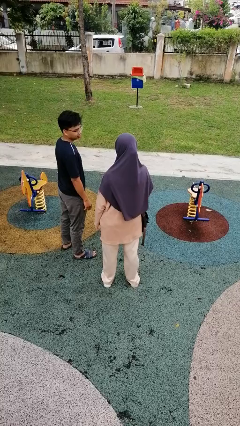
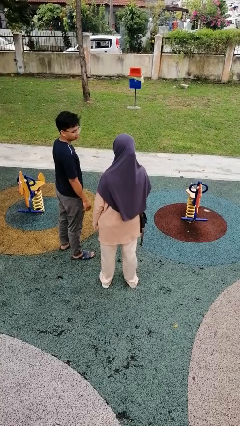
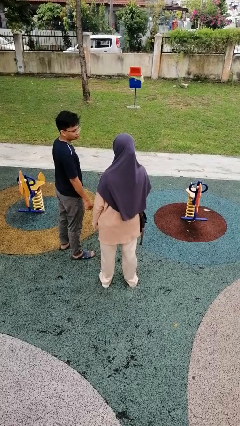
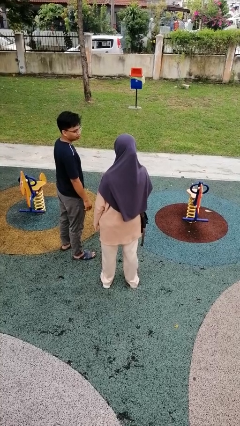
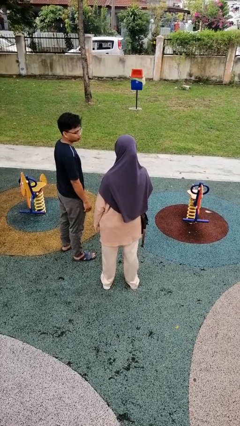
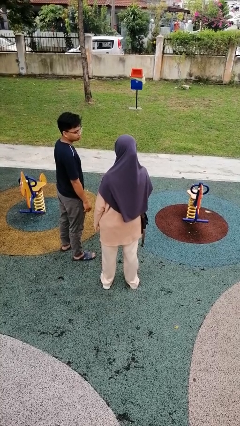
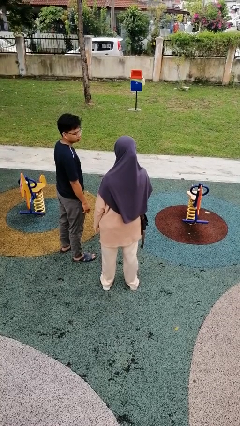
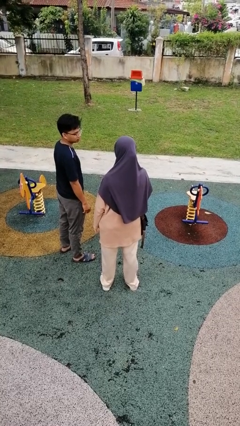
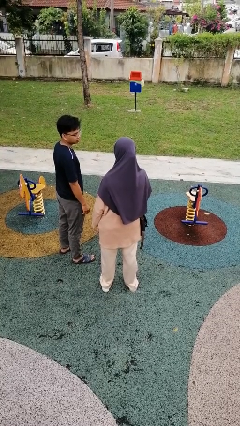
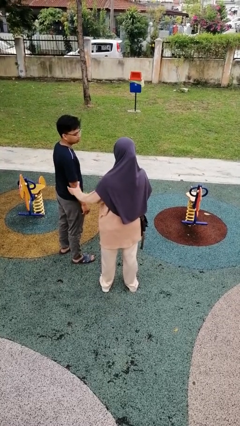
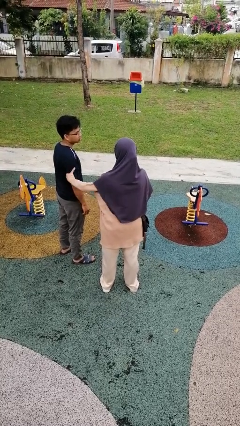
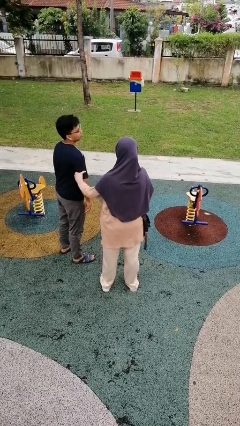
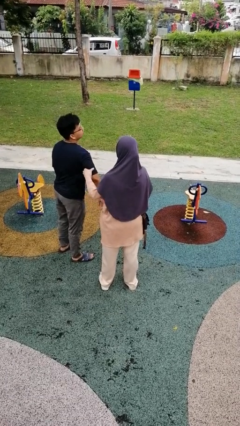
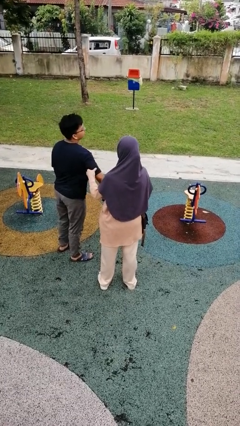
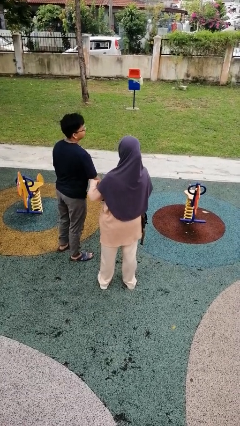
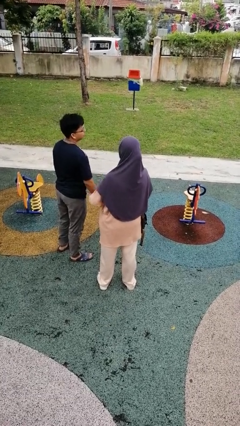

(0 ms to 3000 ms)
person grabs person by bicep

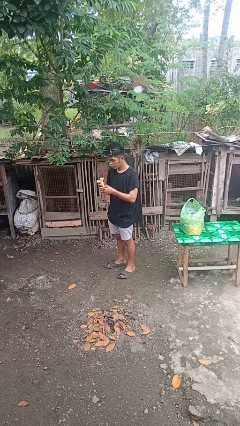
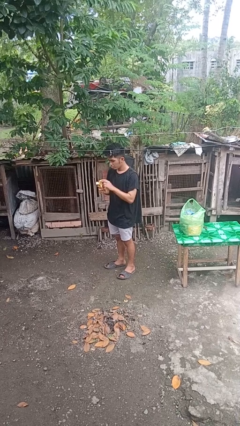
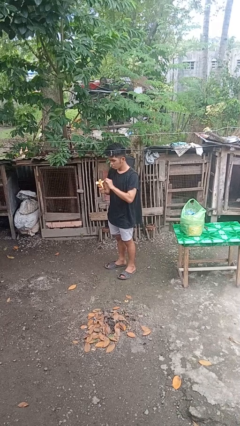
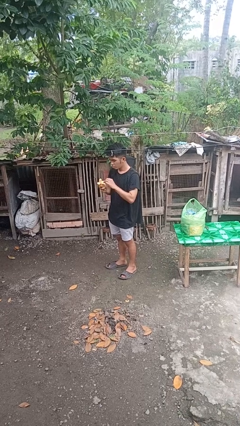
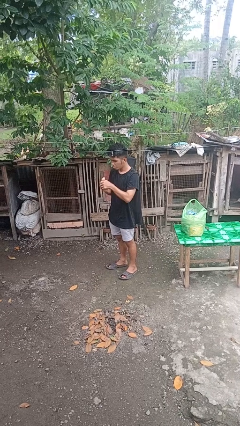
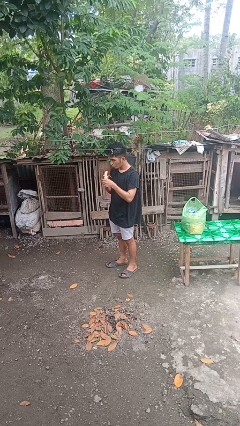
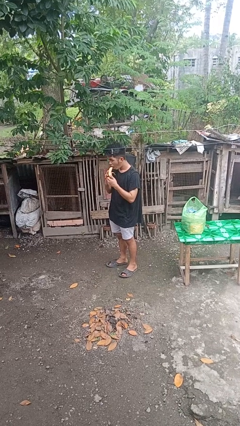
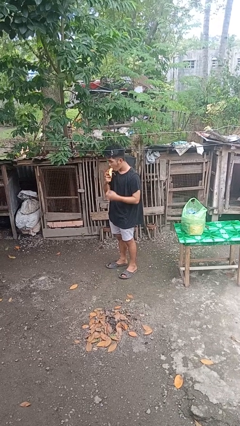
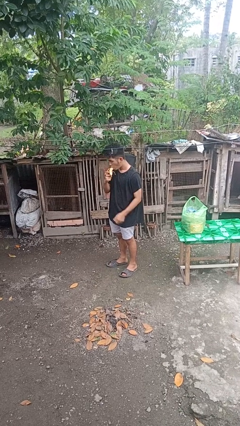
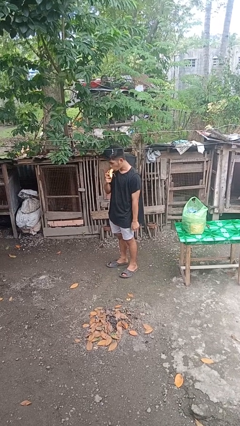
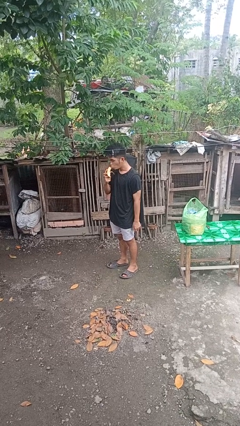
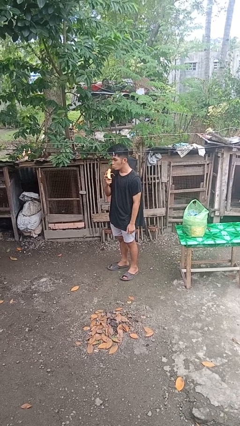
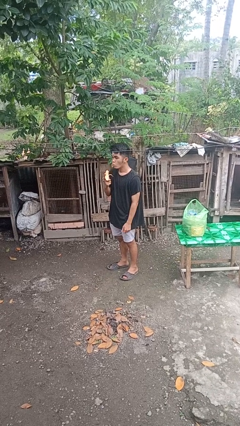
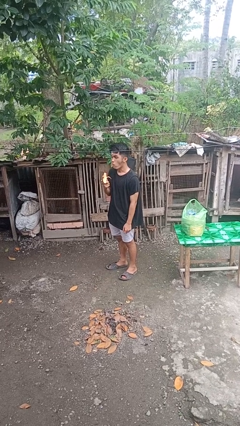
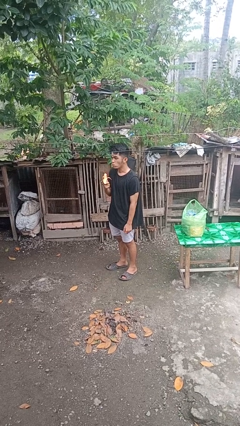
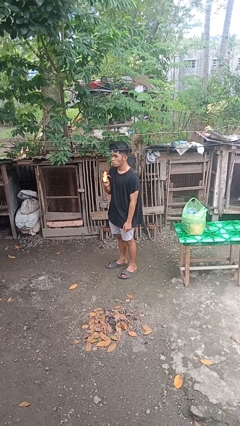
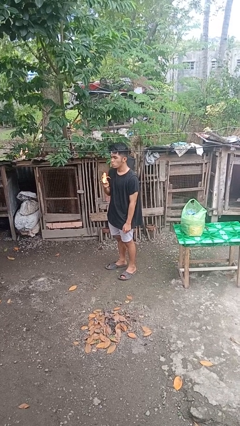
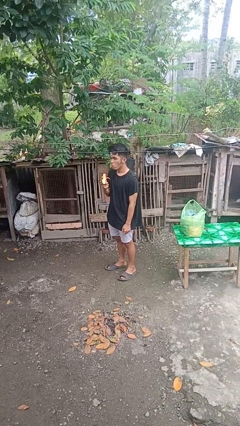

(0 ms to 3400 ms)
person eats banana

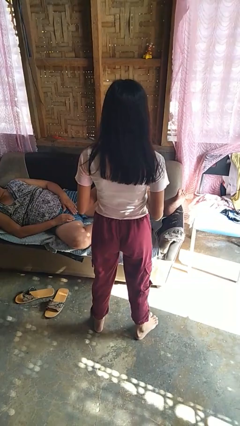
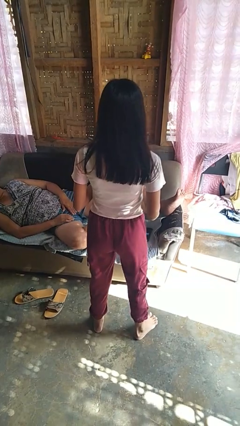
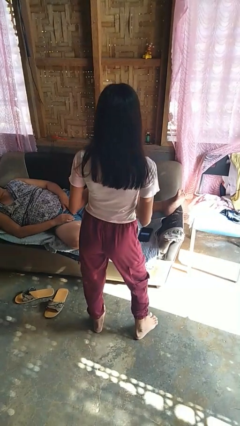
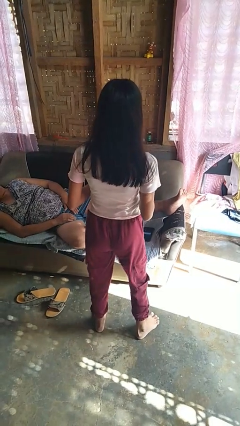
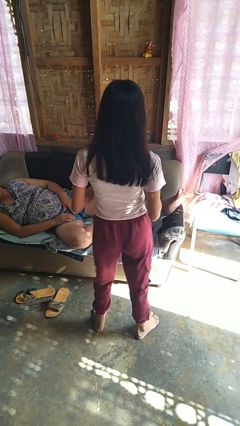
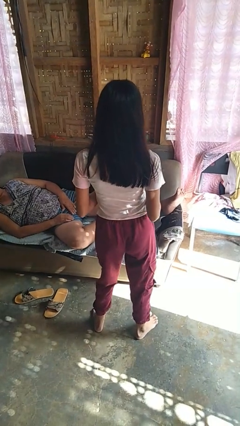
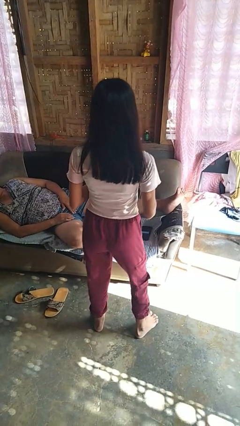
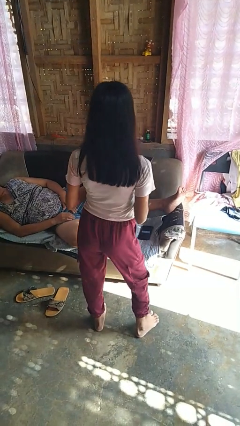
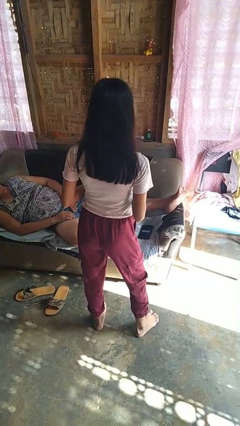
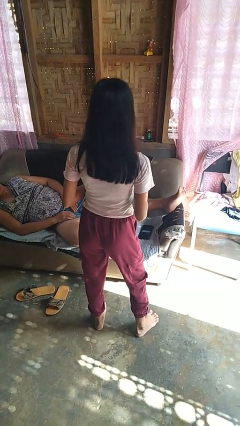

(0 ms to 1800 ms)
person wiggles hips

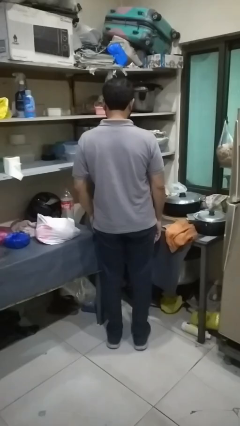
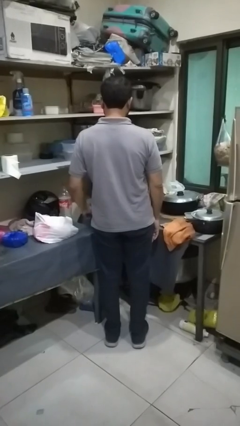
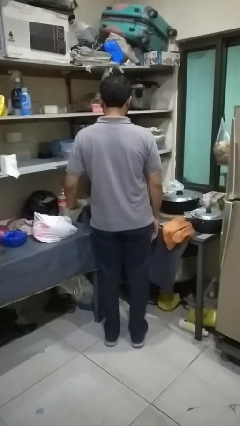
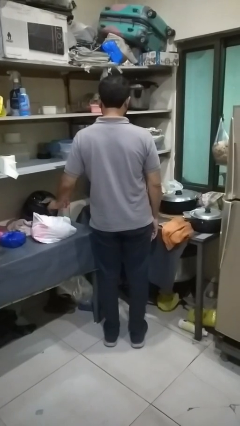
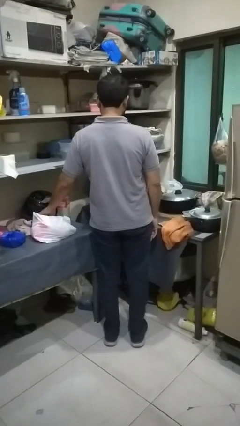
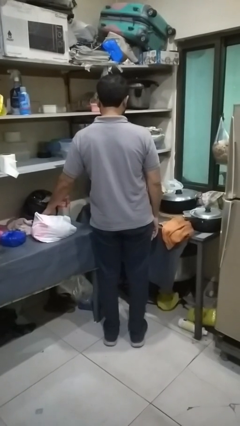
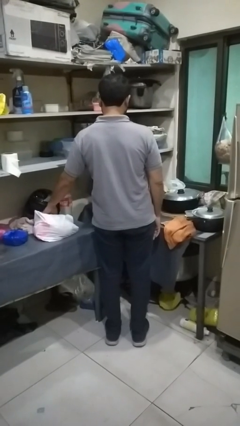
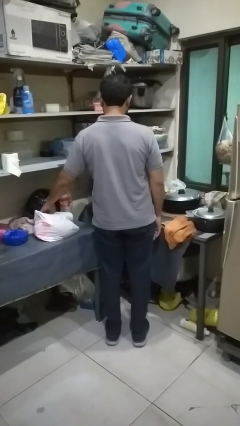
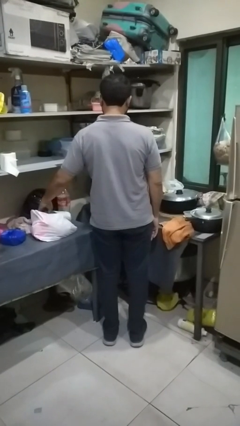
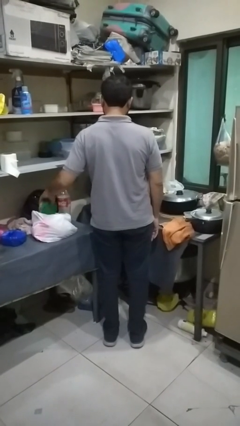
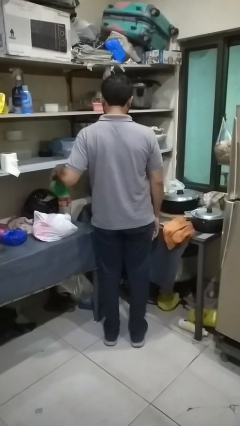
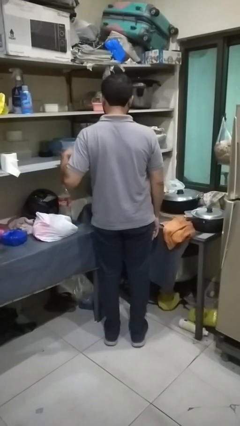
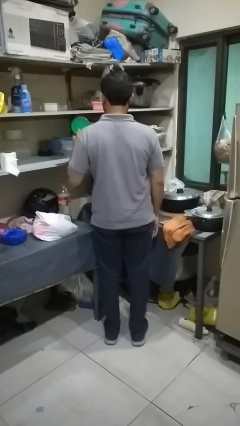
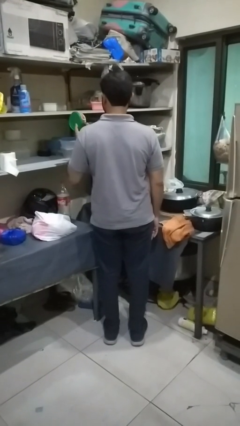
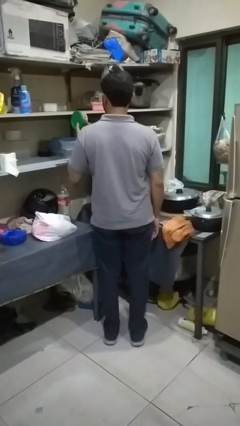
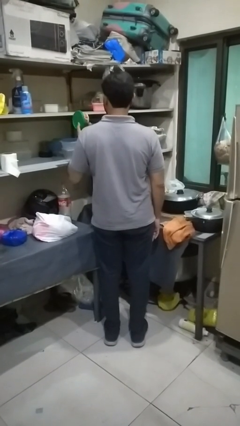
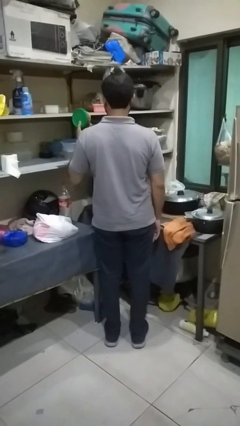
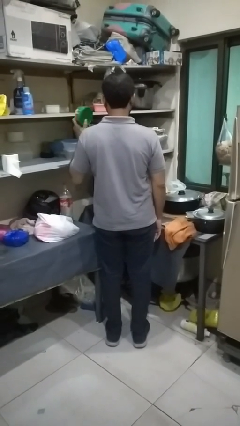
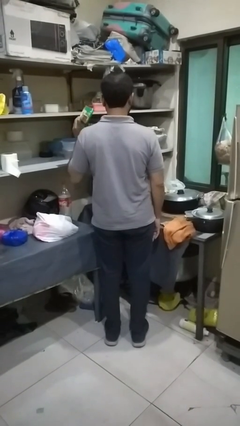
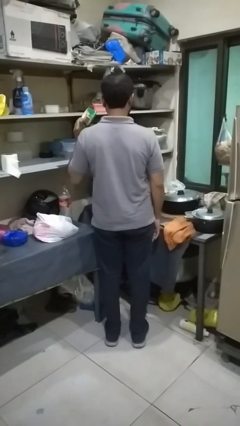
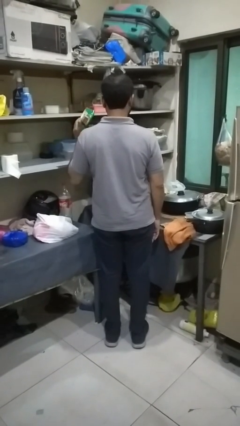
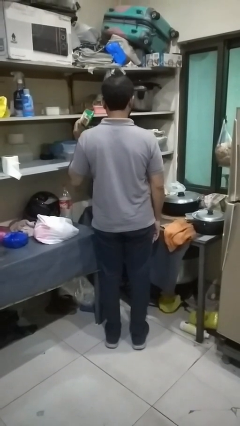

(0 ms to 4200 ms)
person takes object from bag

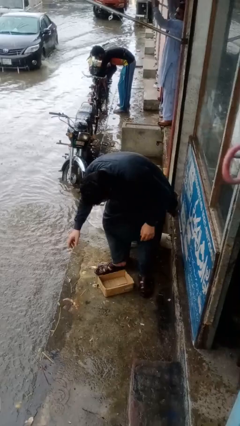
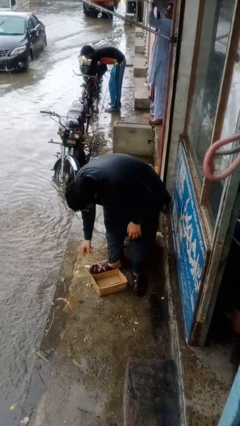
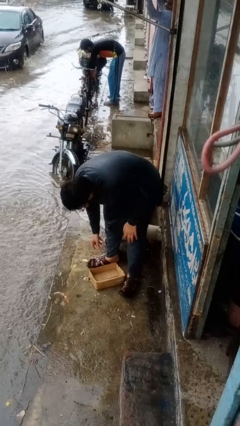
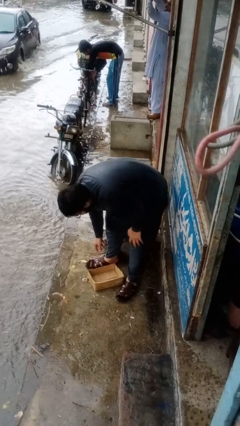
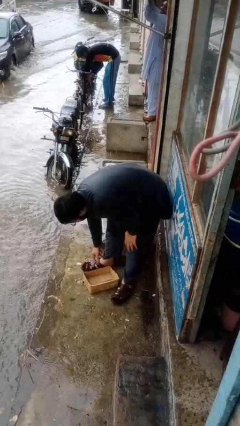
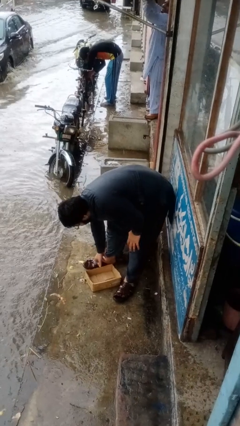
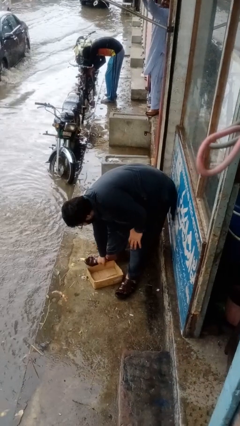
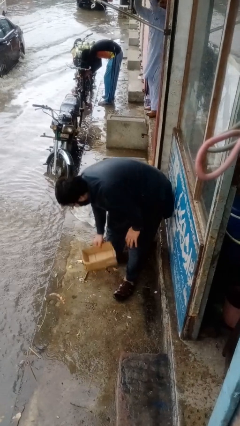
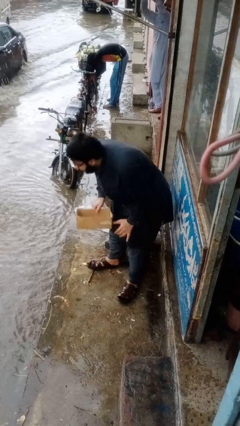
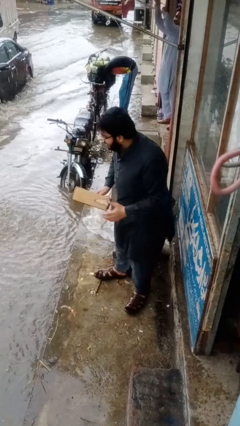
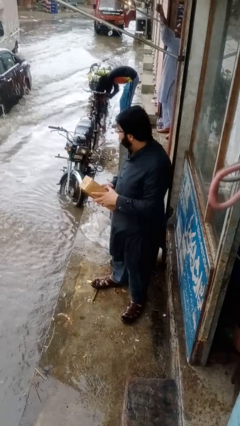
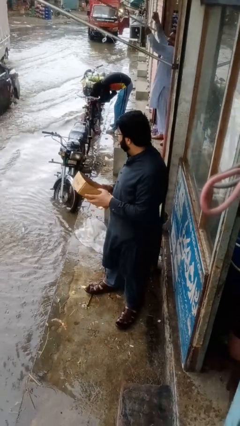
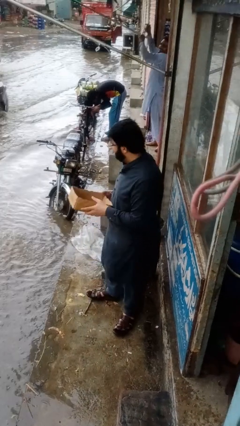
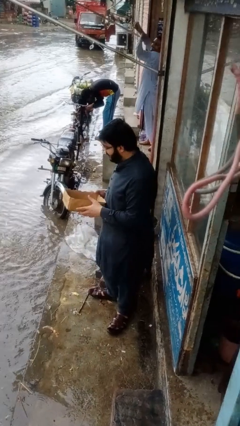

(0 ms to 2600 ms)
person picks up object from floor

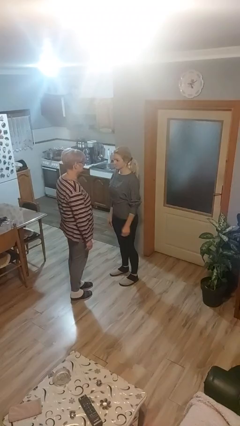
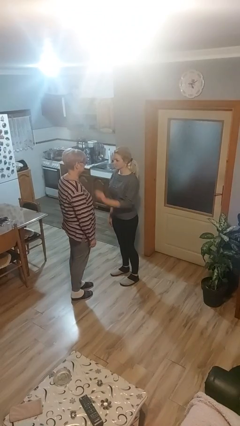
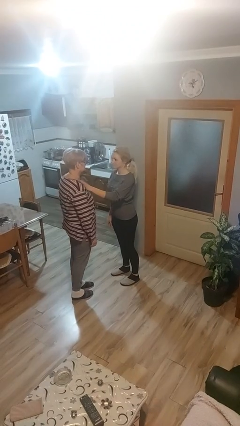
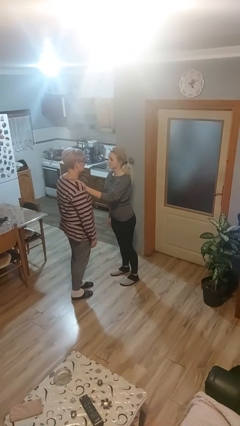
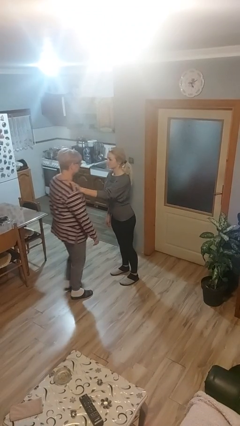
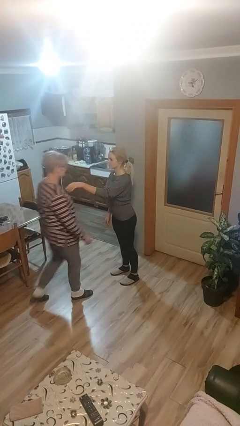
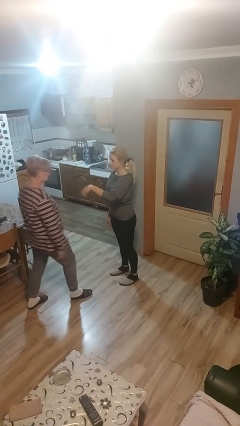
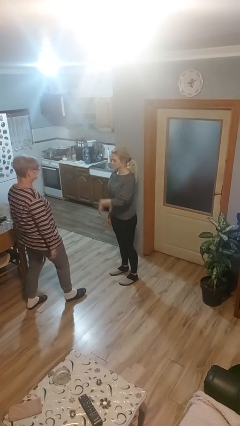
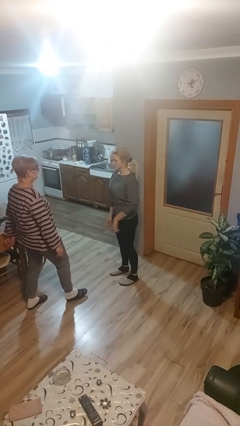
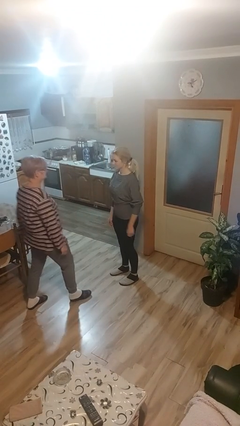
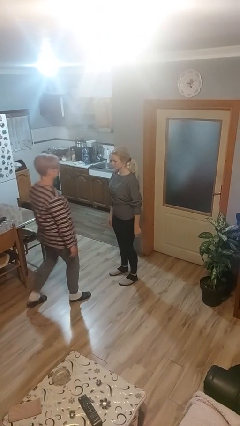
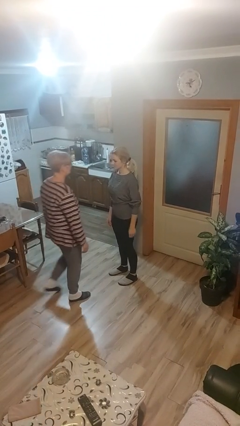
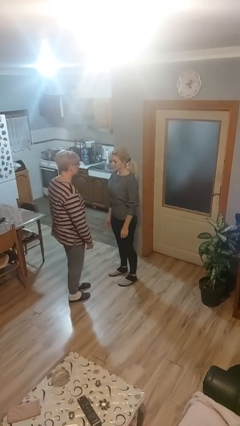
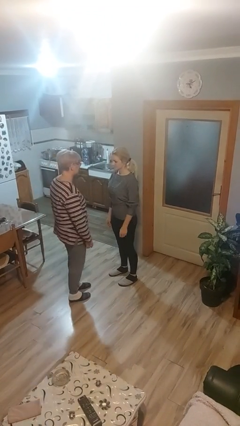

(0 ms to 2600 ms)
person shoves person
